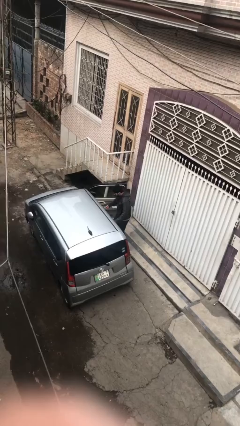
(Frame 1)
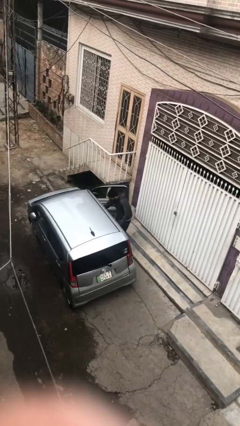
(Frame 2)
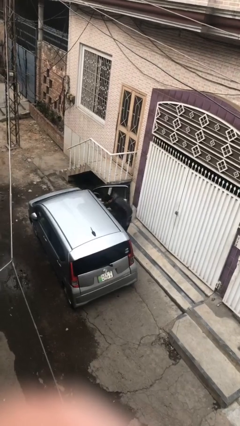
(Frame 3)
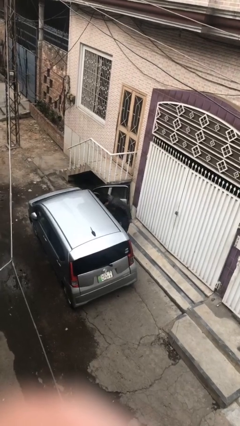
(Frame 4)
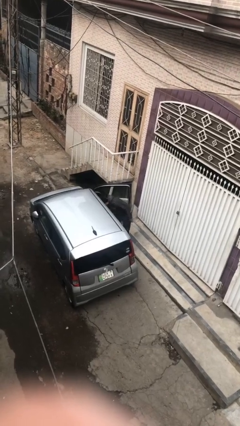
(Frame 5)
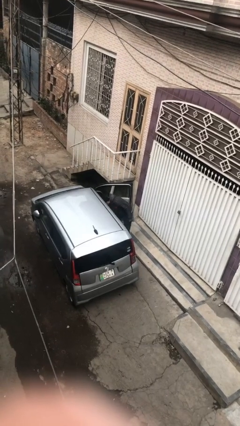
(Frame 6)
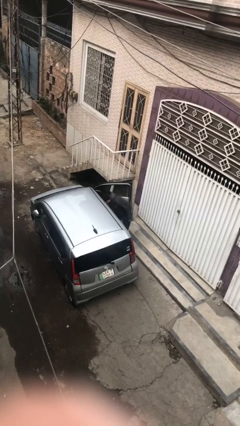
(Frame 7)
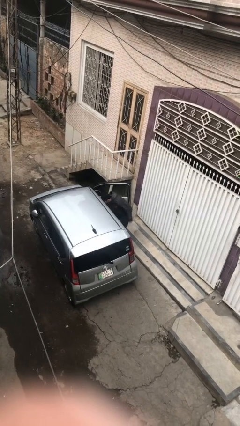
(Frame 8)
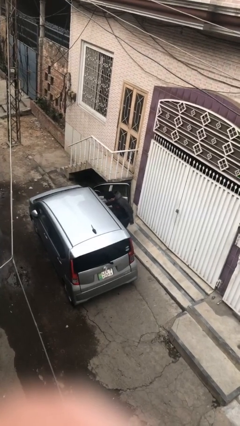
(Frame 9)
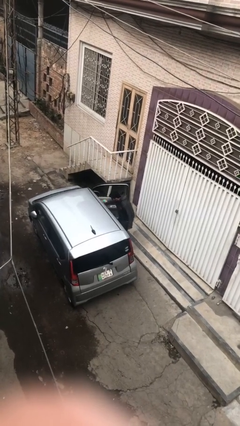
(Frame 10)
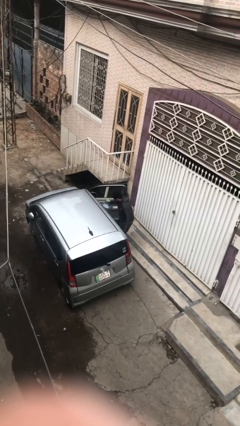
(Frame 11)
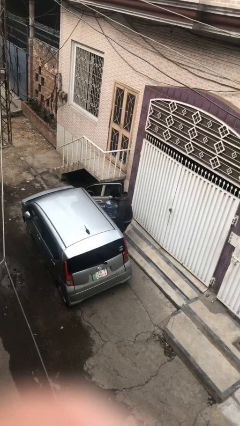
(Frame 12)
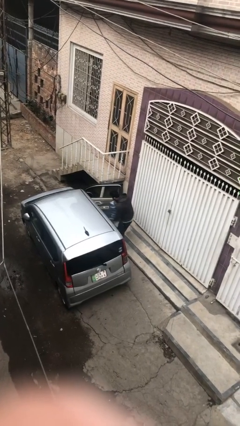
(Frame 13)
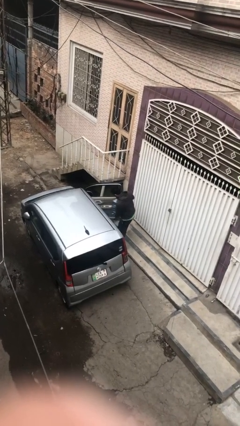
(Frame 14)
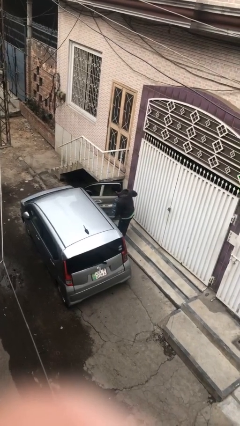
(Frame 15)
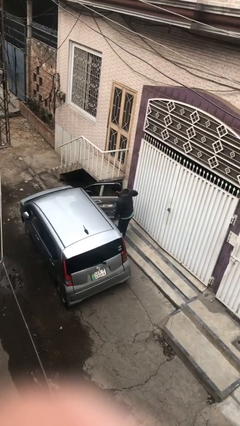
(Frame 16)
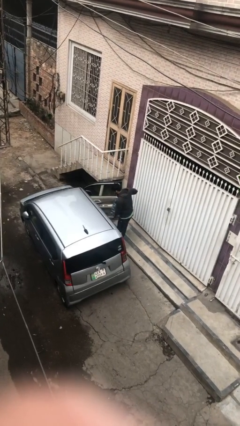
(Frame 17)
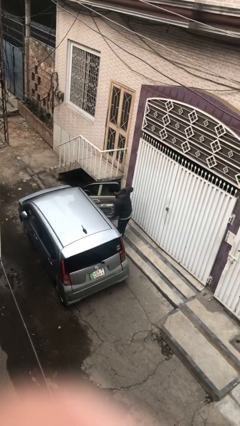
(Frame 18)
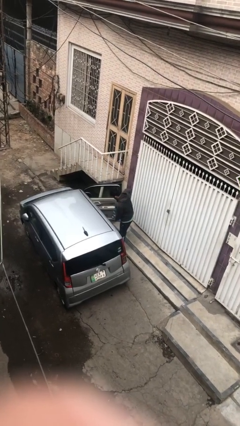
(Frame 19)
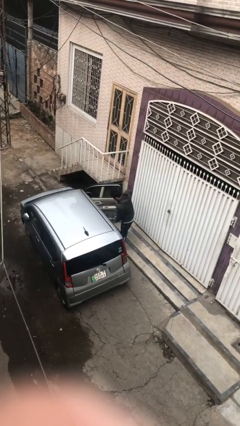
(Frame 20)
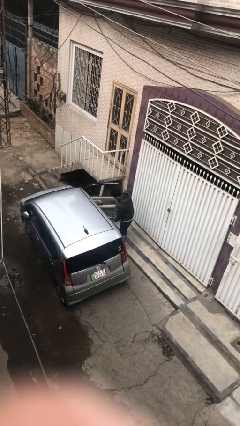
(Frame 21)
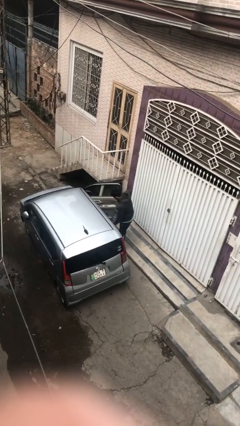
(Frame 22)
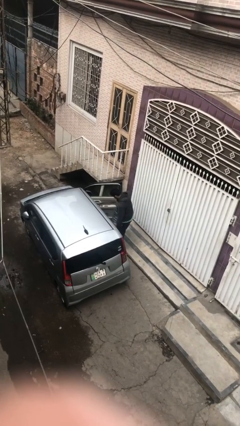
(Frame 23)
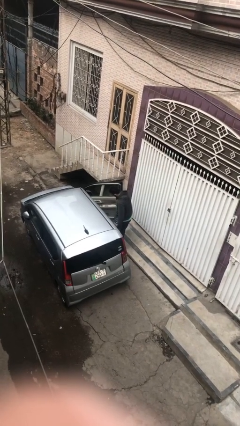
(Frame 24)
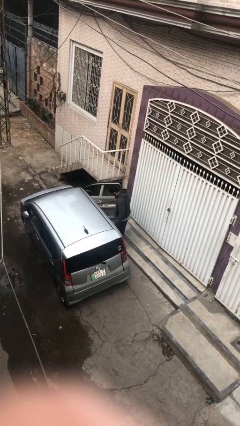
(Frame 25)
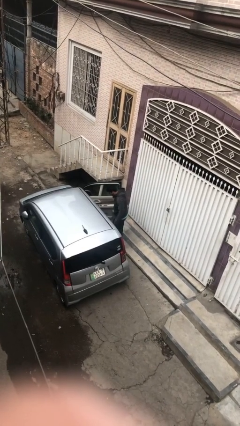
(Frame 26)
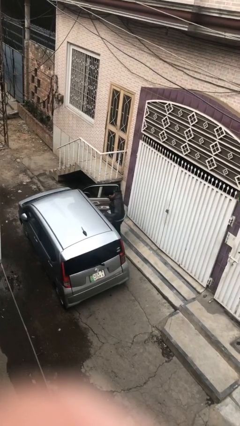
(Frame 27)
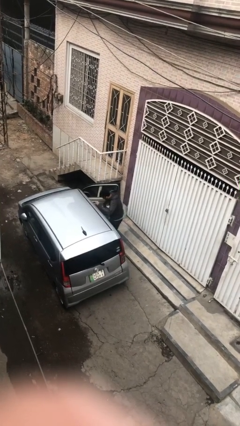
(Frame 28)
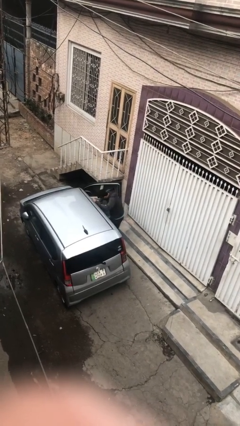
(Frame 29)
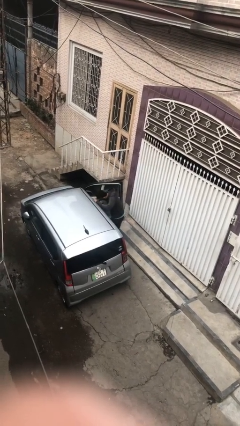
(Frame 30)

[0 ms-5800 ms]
person unloads car

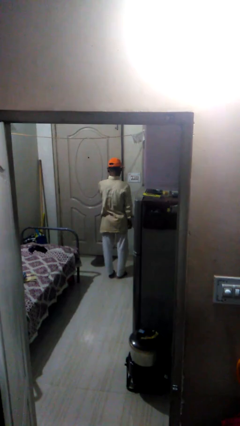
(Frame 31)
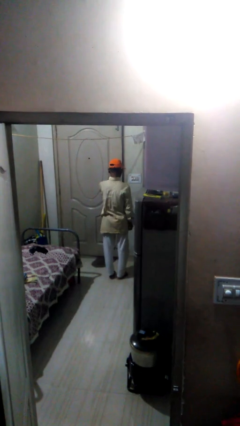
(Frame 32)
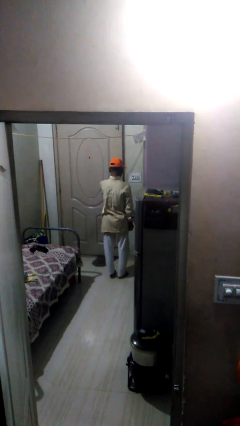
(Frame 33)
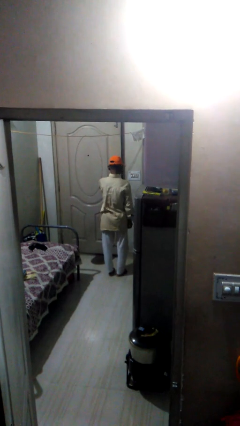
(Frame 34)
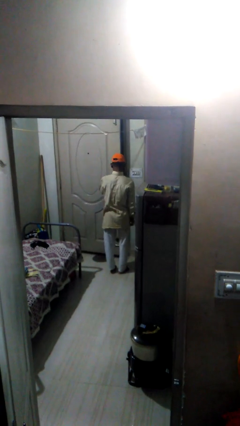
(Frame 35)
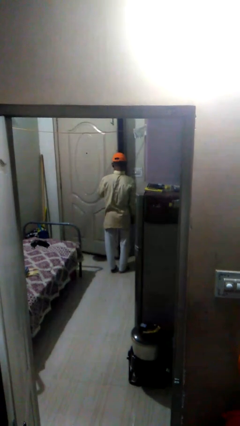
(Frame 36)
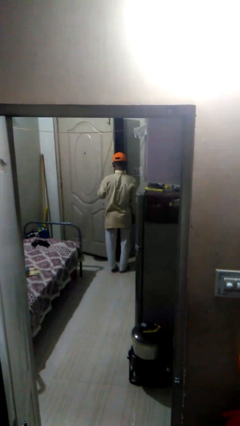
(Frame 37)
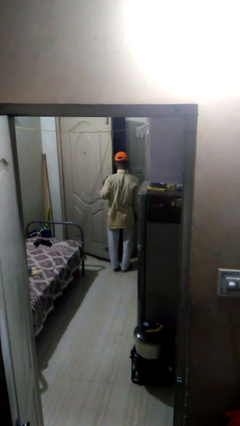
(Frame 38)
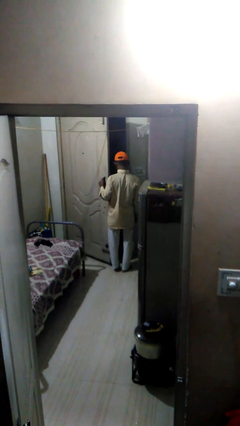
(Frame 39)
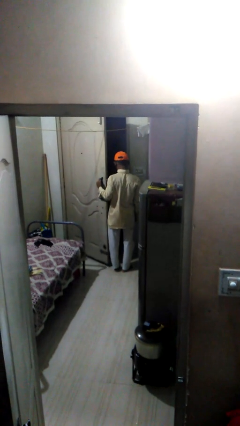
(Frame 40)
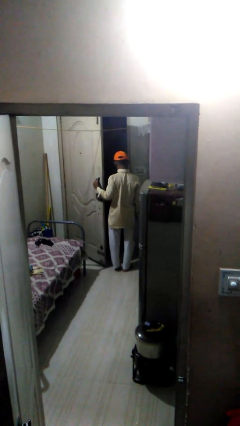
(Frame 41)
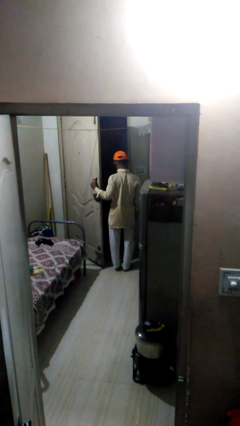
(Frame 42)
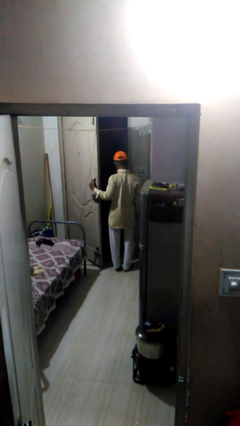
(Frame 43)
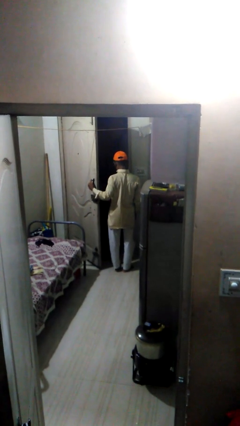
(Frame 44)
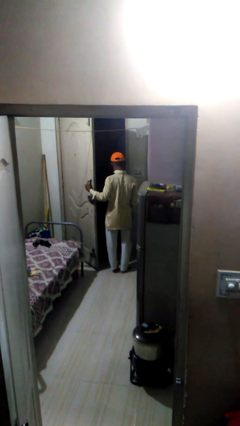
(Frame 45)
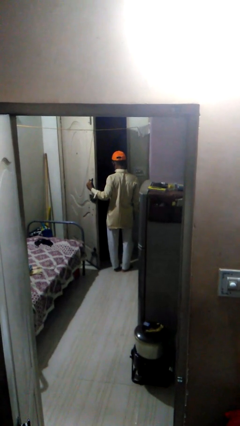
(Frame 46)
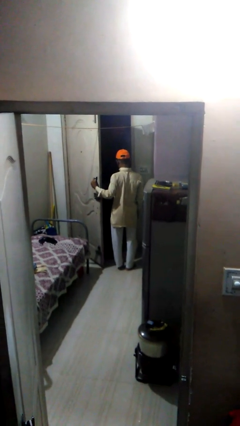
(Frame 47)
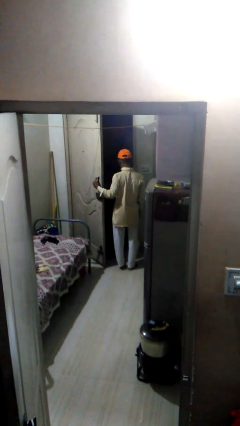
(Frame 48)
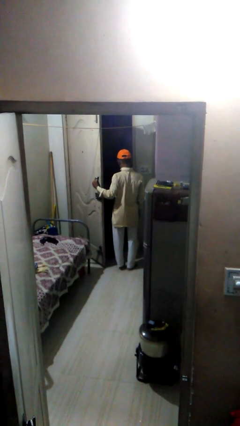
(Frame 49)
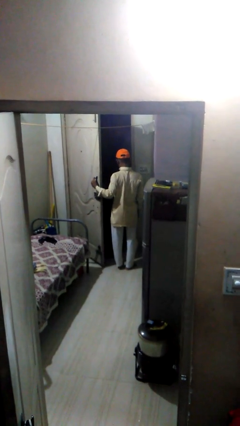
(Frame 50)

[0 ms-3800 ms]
person opens facility door

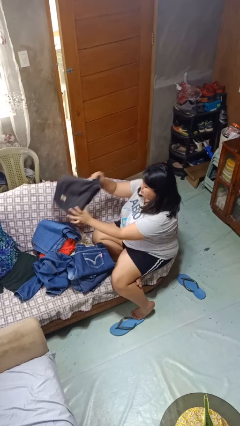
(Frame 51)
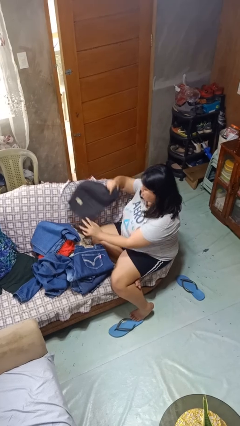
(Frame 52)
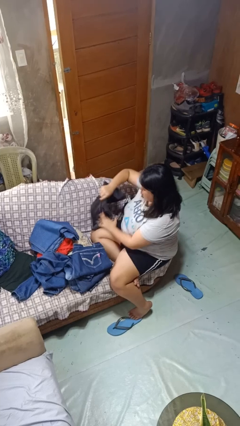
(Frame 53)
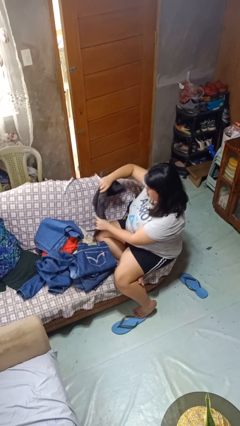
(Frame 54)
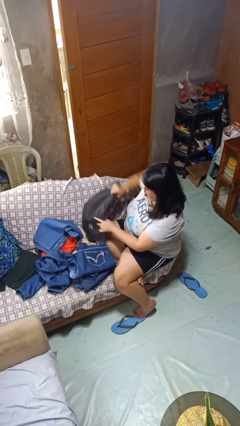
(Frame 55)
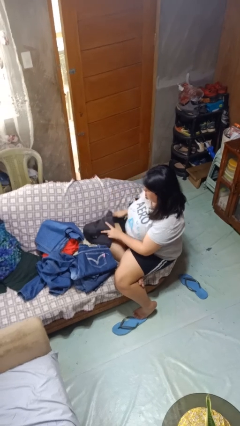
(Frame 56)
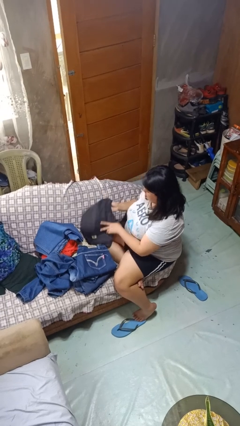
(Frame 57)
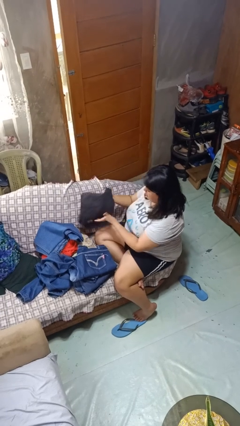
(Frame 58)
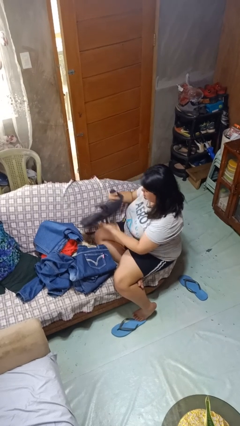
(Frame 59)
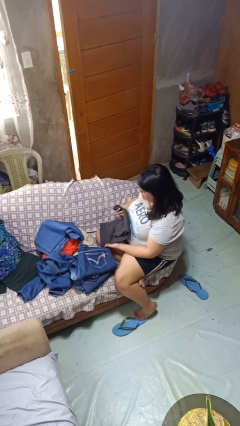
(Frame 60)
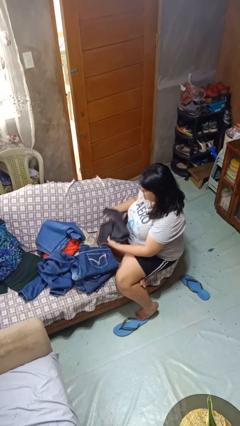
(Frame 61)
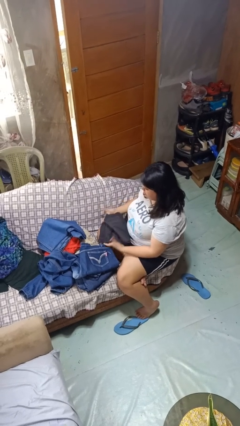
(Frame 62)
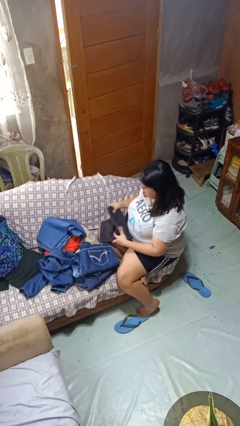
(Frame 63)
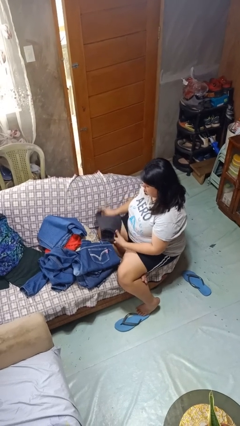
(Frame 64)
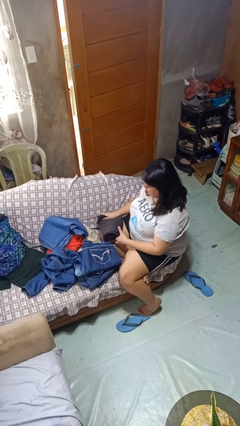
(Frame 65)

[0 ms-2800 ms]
person folds pants

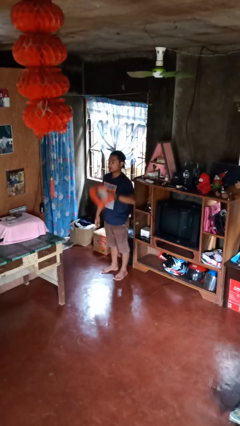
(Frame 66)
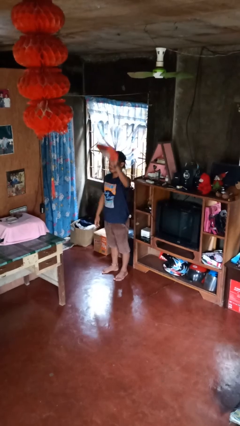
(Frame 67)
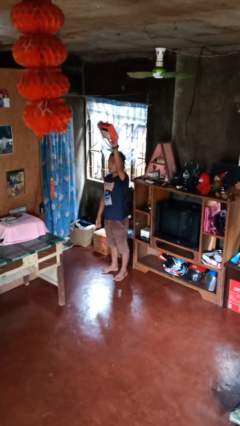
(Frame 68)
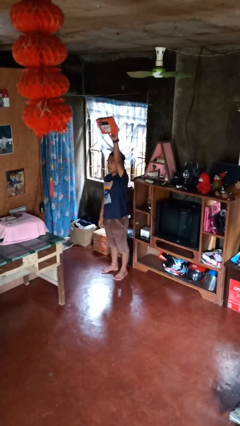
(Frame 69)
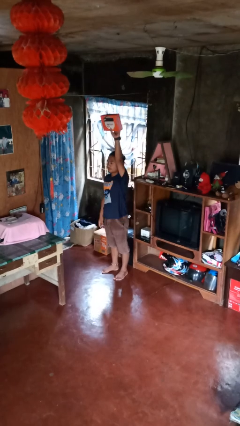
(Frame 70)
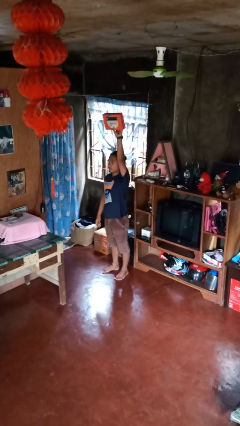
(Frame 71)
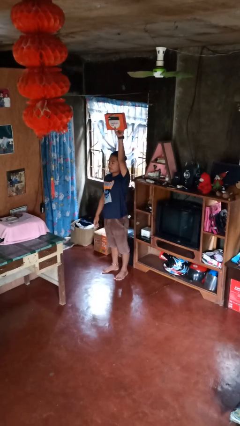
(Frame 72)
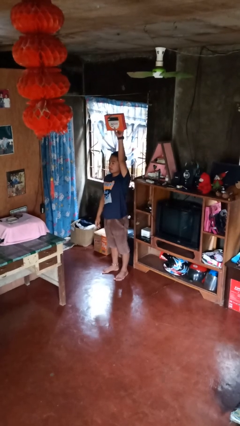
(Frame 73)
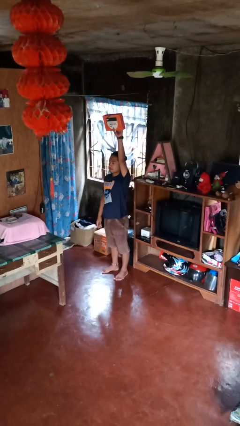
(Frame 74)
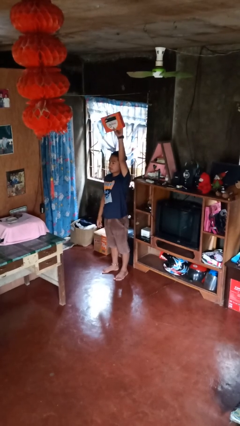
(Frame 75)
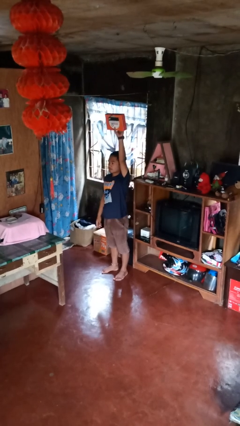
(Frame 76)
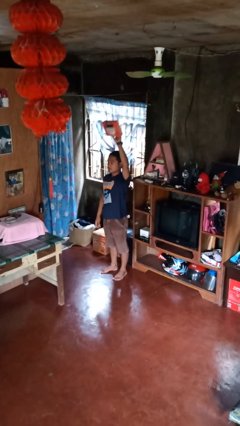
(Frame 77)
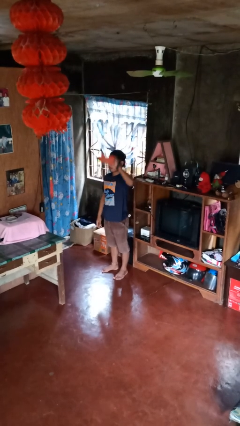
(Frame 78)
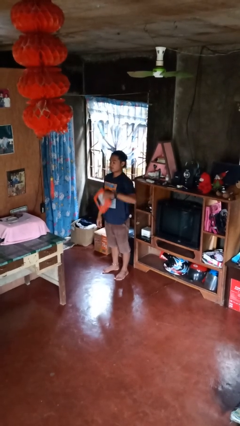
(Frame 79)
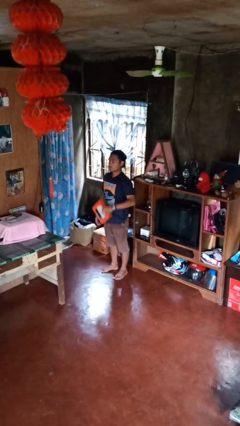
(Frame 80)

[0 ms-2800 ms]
person holds object above head

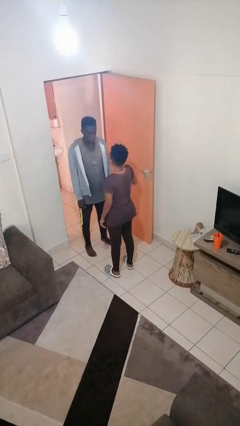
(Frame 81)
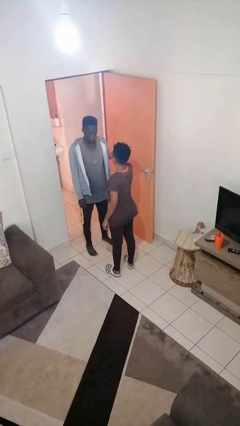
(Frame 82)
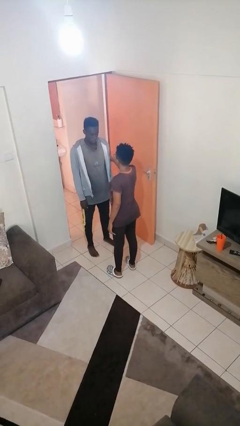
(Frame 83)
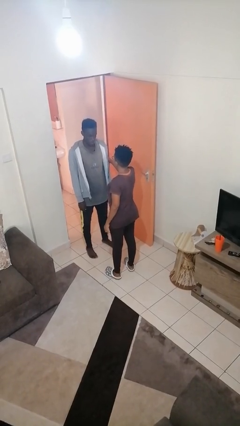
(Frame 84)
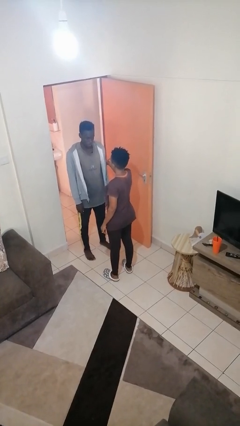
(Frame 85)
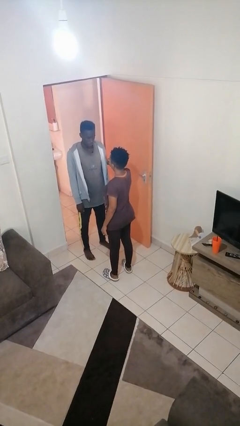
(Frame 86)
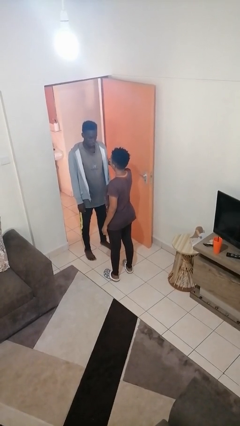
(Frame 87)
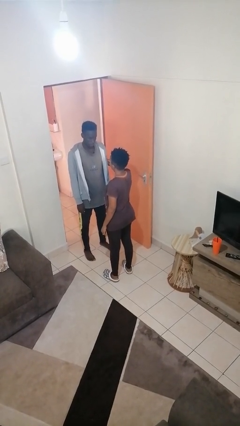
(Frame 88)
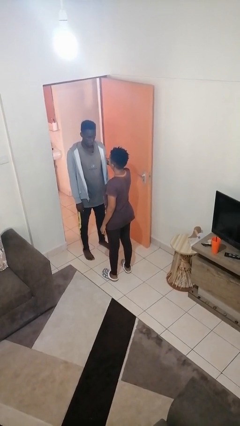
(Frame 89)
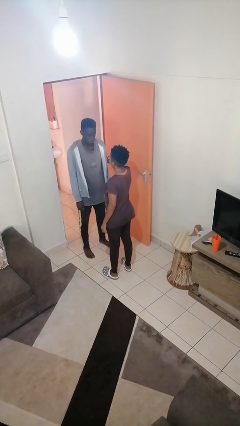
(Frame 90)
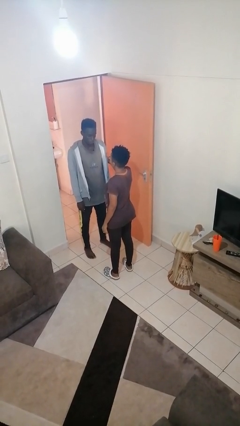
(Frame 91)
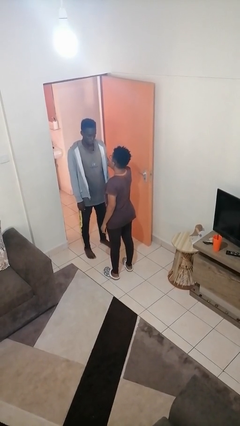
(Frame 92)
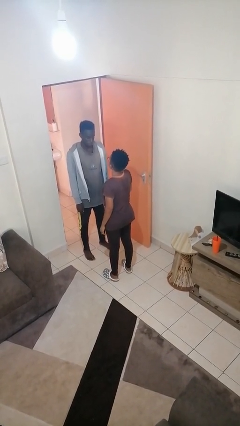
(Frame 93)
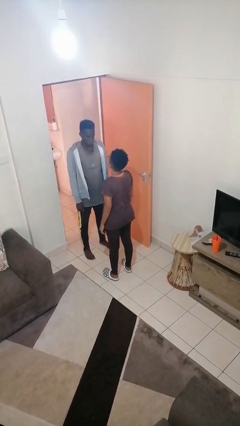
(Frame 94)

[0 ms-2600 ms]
person grabs person by bicep

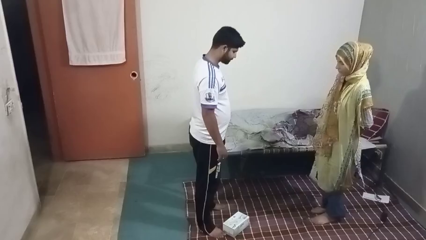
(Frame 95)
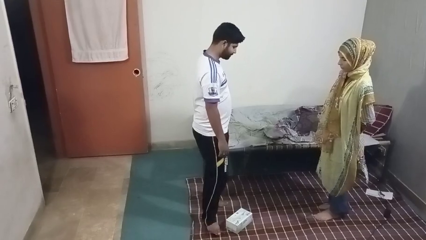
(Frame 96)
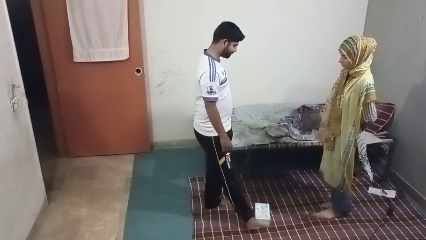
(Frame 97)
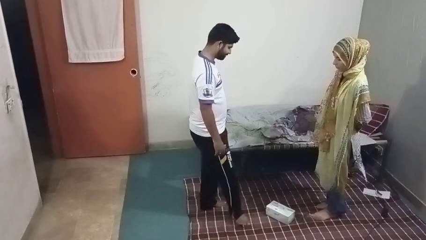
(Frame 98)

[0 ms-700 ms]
person kicks object to person
